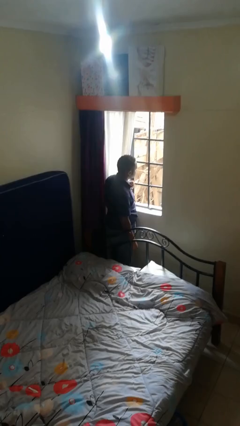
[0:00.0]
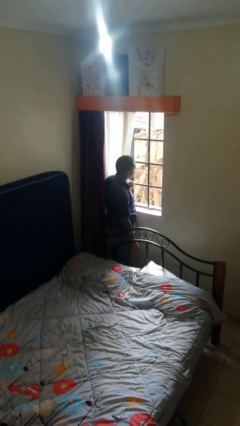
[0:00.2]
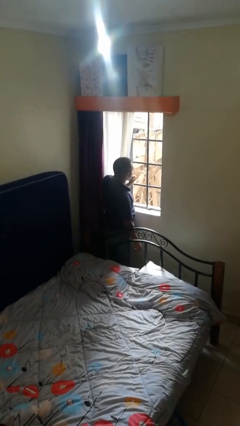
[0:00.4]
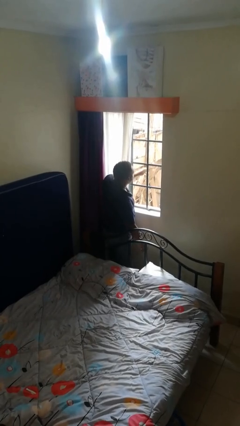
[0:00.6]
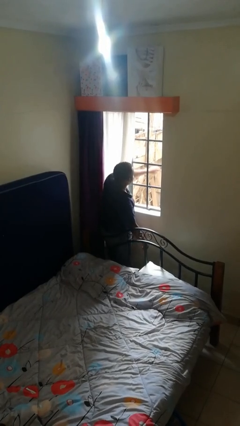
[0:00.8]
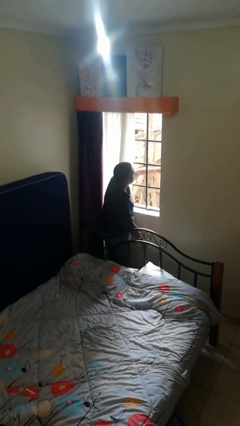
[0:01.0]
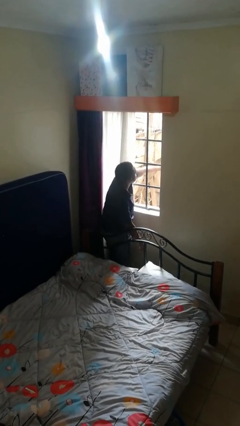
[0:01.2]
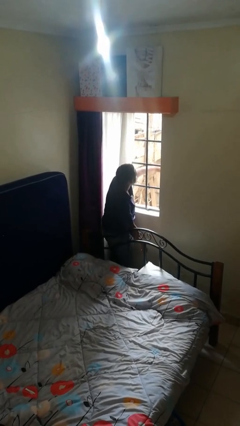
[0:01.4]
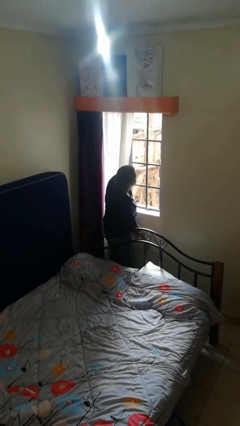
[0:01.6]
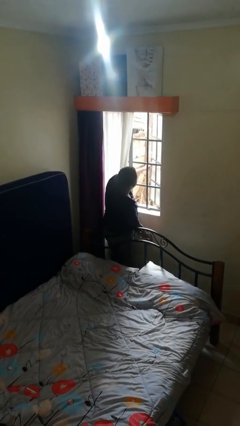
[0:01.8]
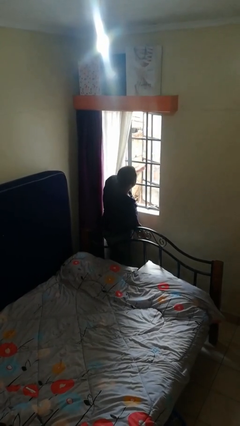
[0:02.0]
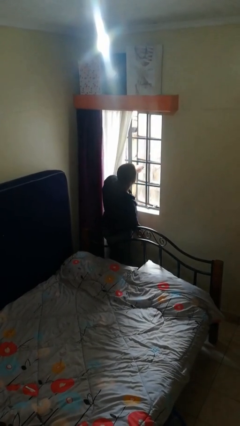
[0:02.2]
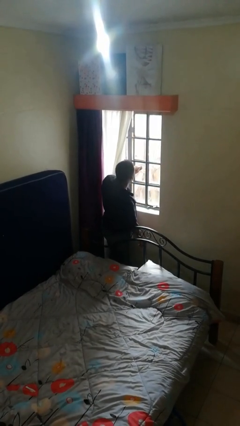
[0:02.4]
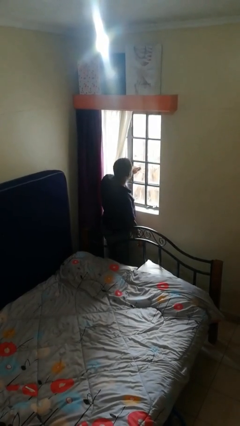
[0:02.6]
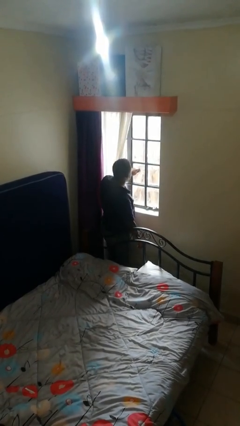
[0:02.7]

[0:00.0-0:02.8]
person closes home window

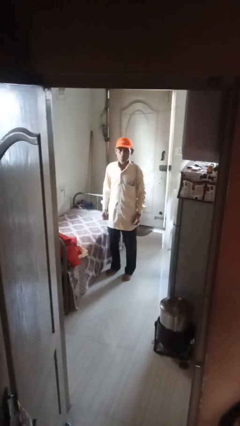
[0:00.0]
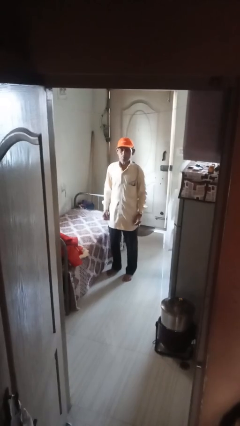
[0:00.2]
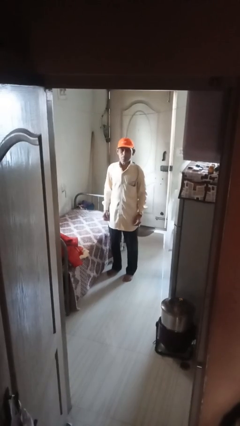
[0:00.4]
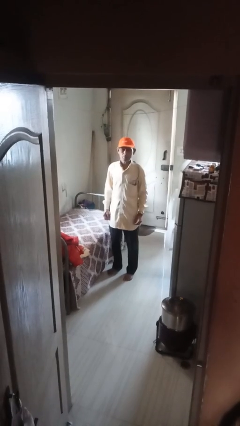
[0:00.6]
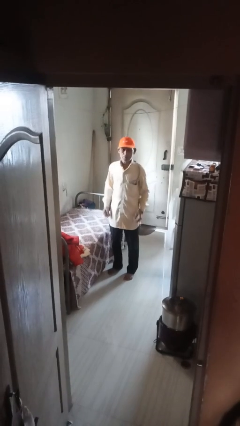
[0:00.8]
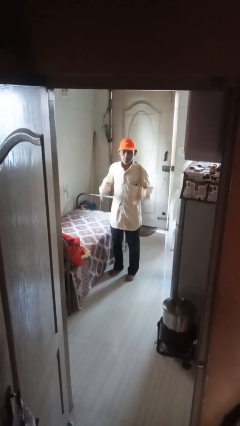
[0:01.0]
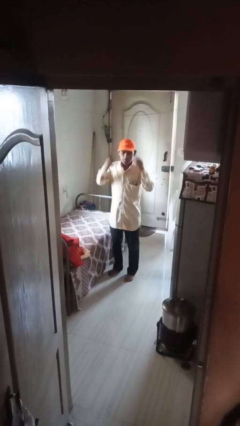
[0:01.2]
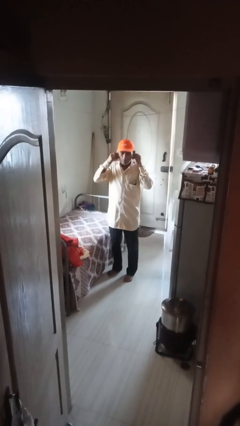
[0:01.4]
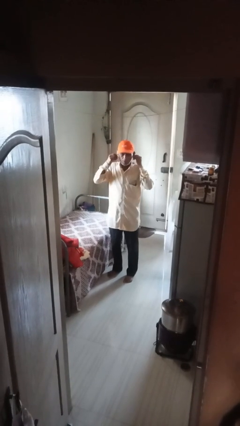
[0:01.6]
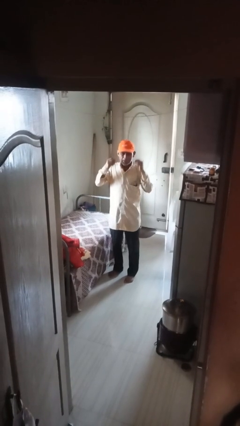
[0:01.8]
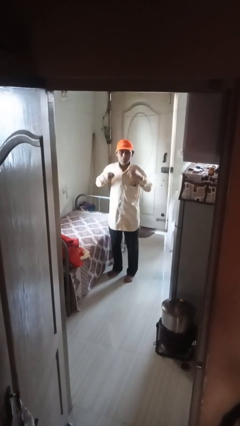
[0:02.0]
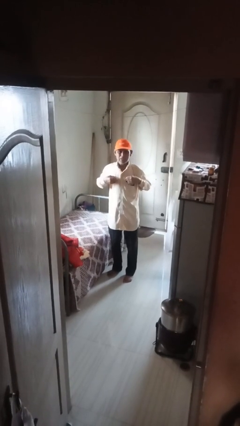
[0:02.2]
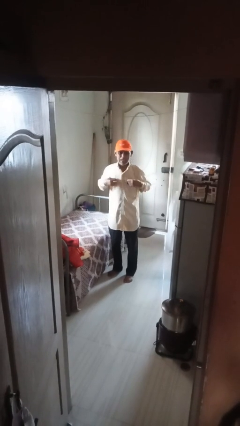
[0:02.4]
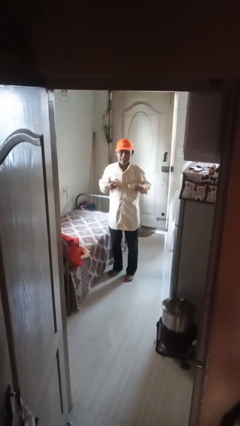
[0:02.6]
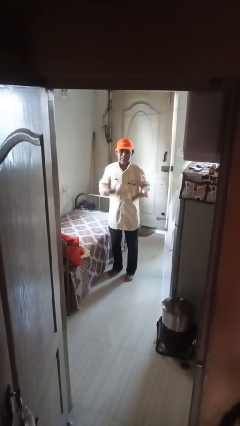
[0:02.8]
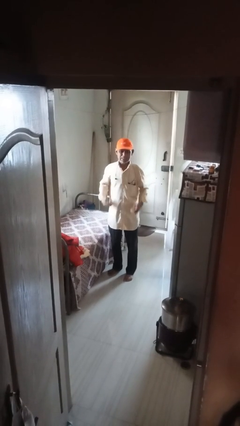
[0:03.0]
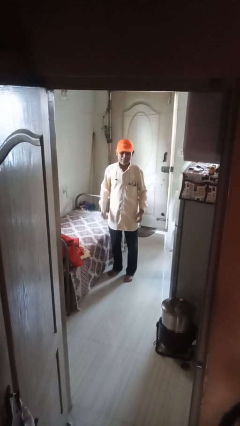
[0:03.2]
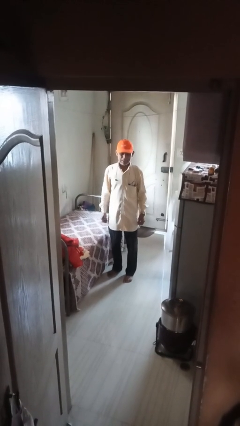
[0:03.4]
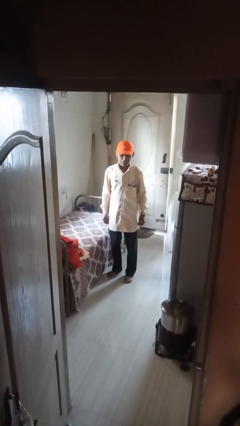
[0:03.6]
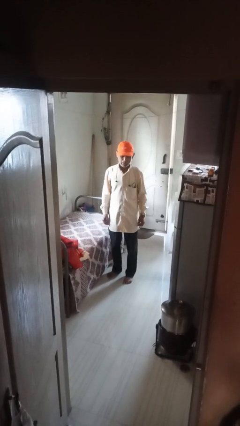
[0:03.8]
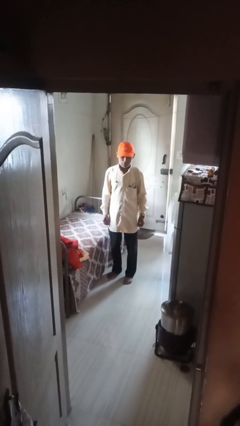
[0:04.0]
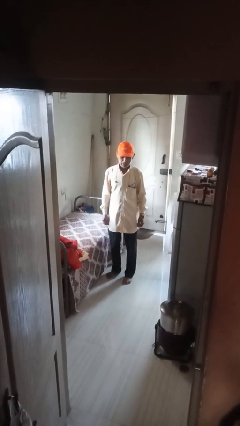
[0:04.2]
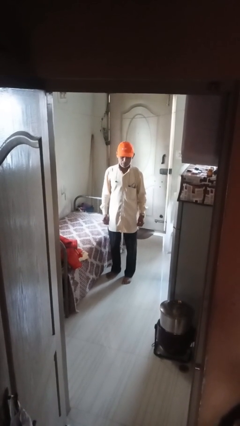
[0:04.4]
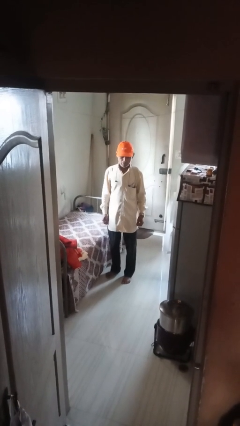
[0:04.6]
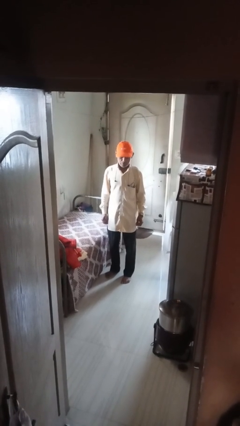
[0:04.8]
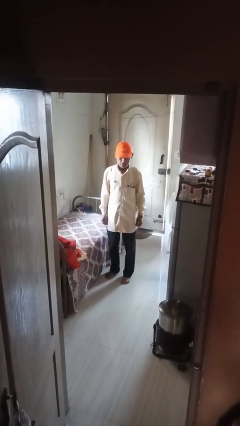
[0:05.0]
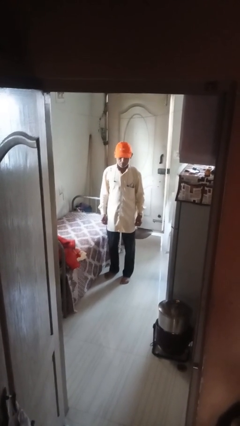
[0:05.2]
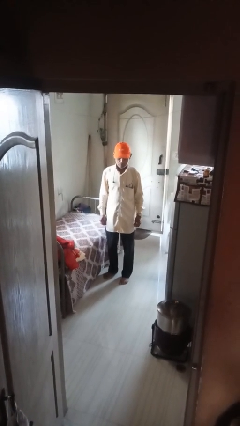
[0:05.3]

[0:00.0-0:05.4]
person takes off headphones

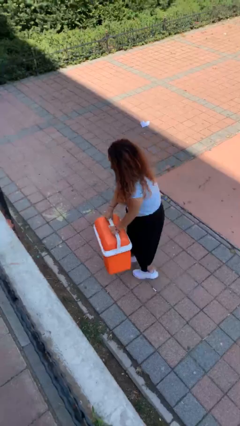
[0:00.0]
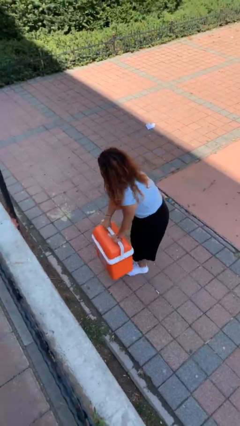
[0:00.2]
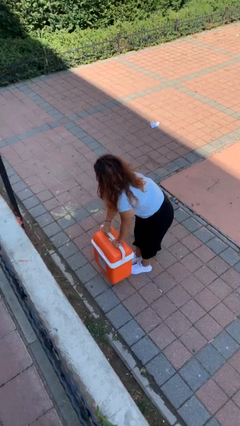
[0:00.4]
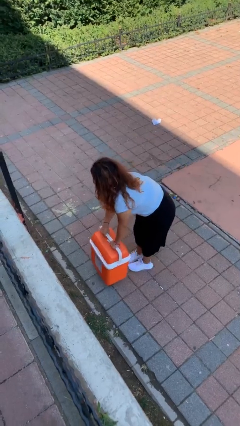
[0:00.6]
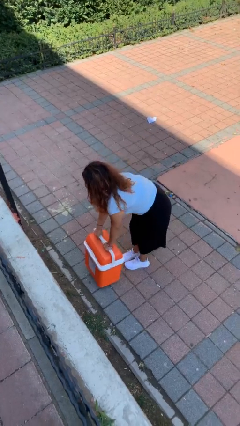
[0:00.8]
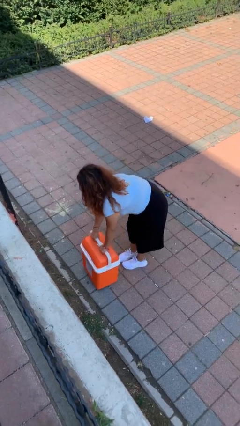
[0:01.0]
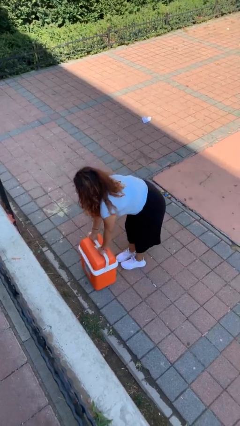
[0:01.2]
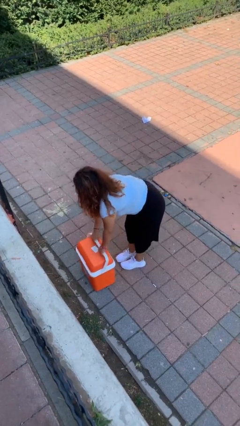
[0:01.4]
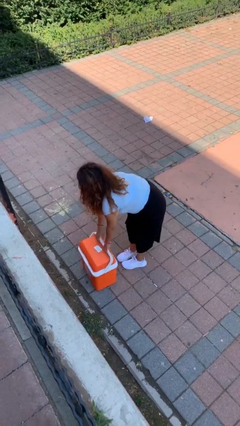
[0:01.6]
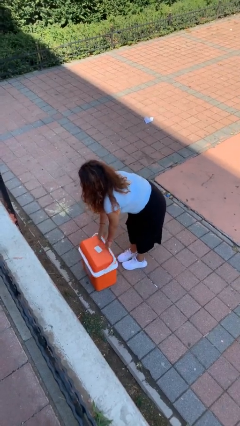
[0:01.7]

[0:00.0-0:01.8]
person puts down object on floor

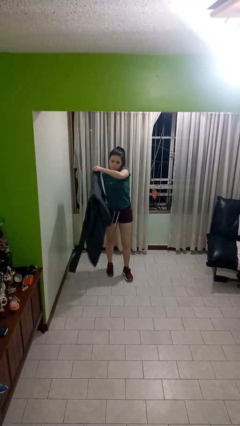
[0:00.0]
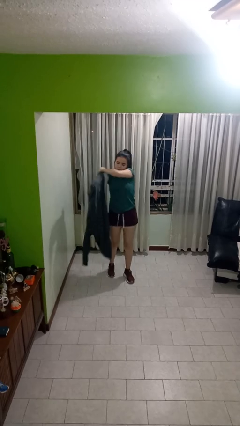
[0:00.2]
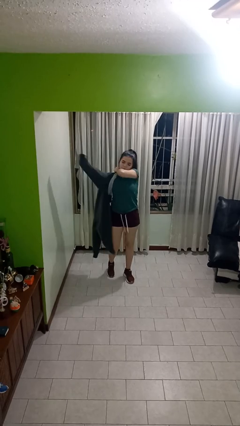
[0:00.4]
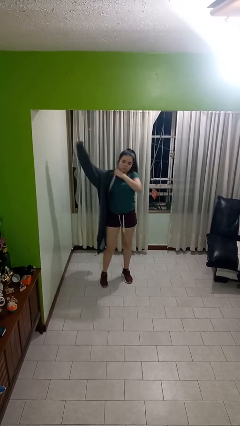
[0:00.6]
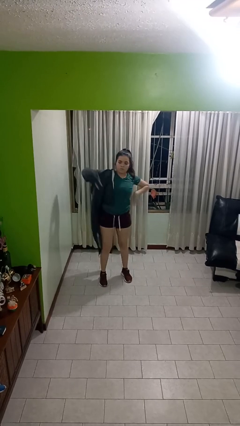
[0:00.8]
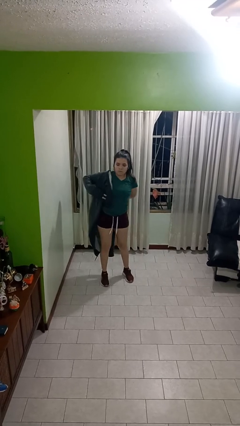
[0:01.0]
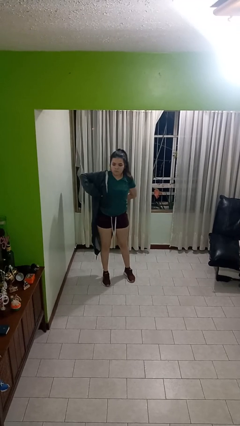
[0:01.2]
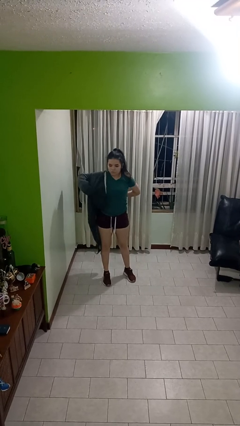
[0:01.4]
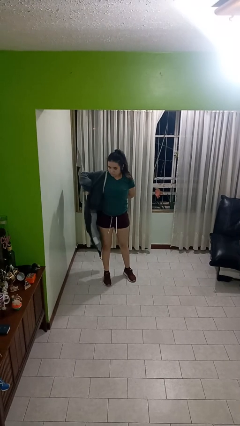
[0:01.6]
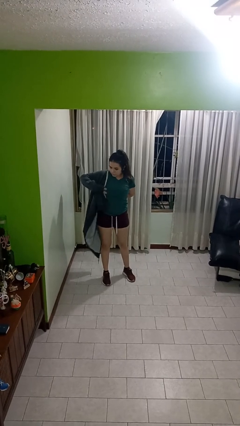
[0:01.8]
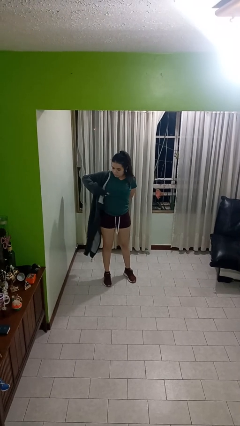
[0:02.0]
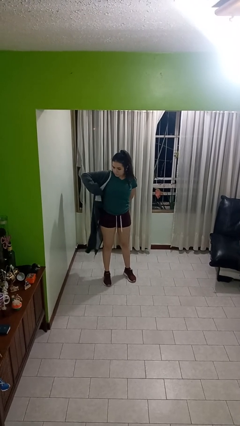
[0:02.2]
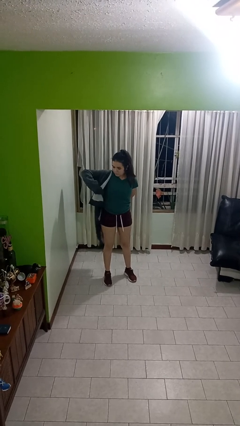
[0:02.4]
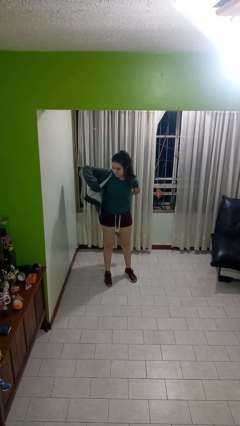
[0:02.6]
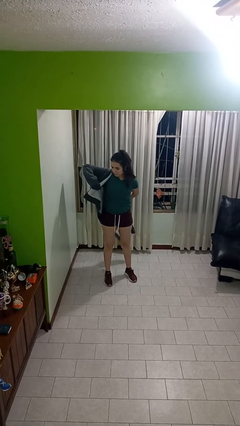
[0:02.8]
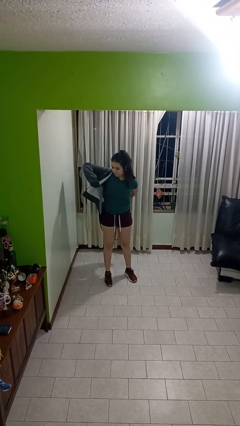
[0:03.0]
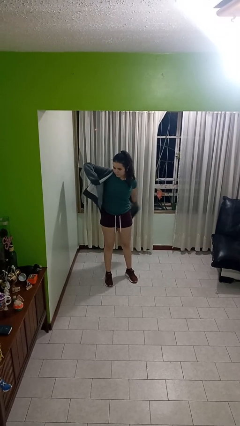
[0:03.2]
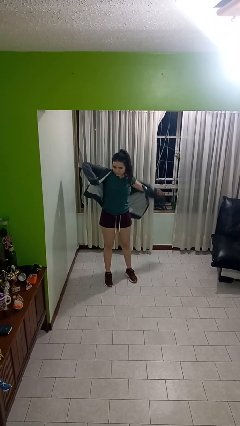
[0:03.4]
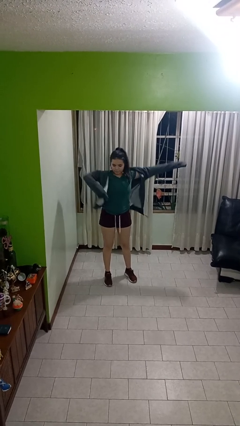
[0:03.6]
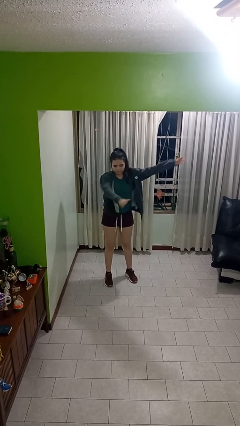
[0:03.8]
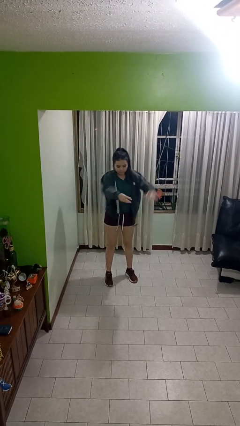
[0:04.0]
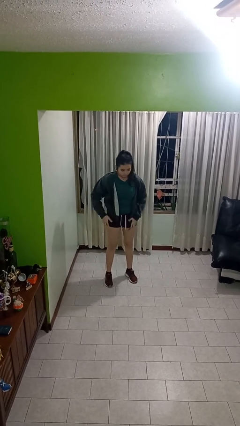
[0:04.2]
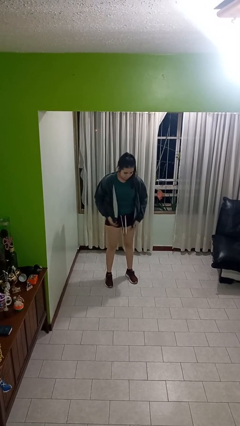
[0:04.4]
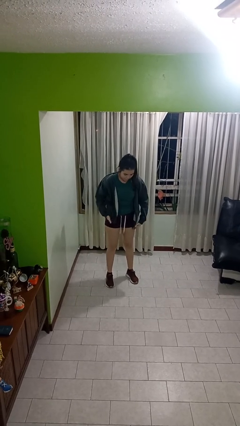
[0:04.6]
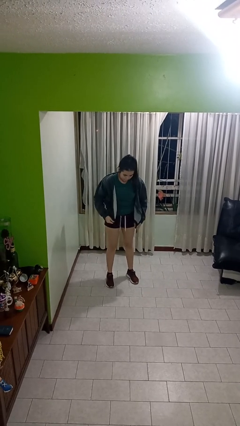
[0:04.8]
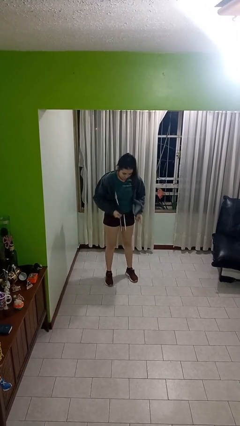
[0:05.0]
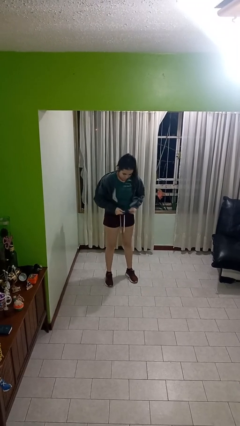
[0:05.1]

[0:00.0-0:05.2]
person puts on jacket

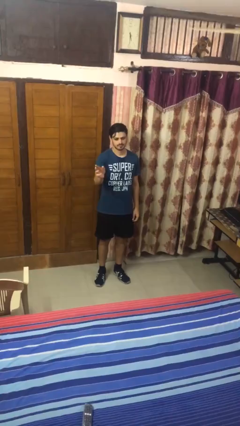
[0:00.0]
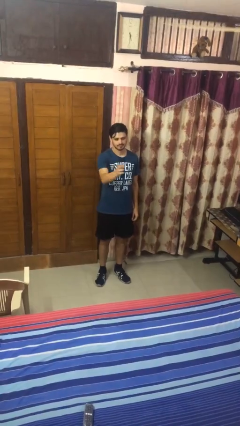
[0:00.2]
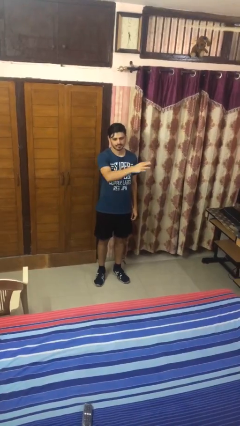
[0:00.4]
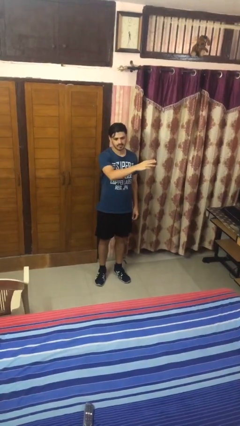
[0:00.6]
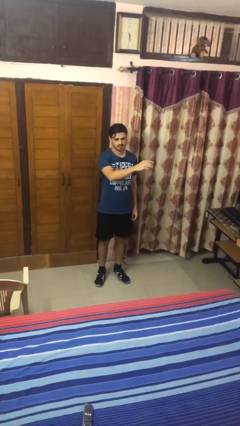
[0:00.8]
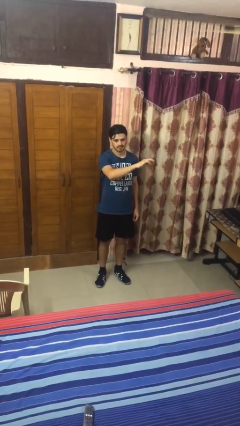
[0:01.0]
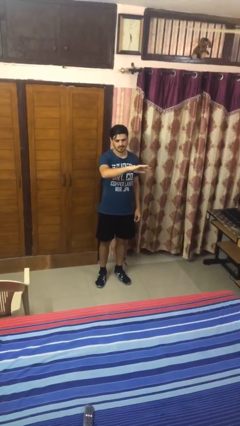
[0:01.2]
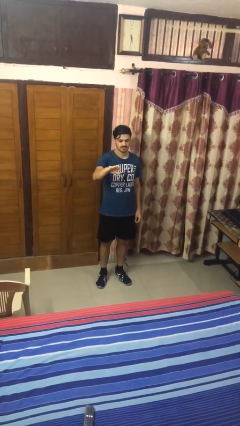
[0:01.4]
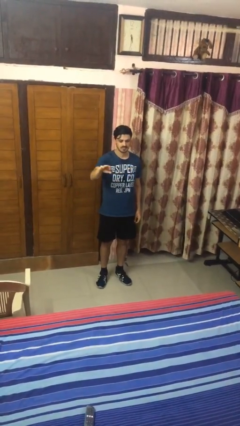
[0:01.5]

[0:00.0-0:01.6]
person gestures swipe right

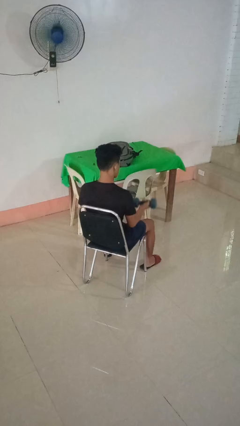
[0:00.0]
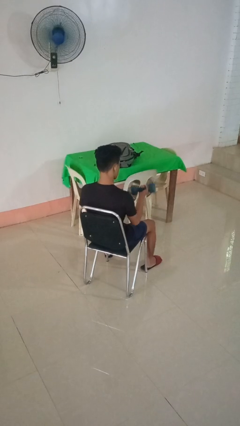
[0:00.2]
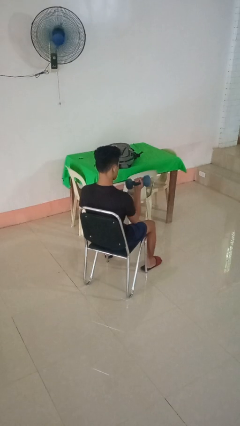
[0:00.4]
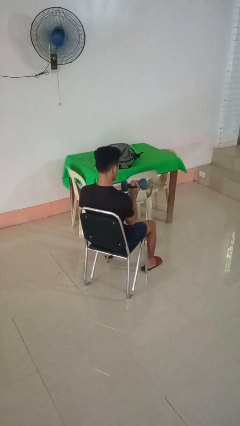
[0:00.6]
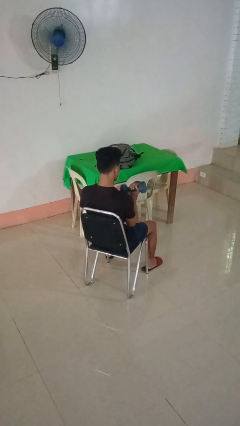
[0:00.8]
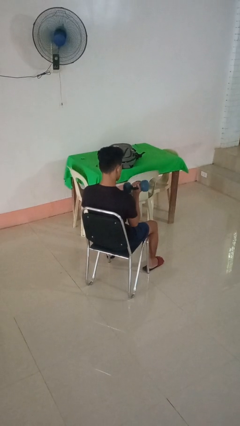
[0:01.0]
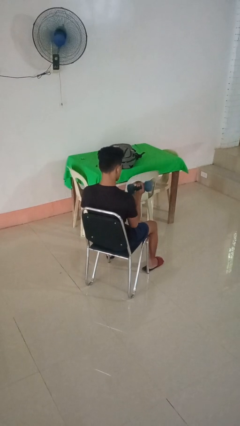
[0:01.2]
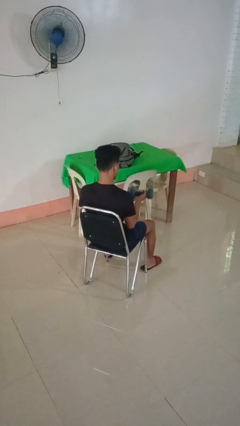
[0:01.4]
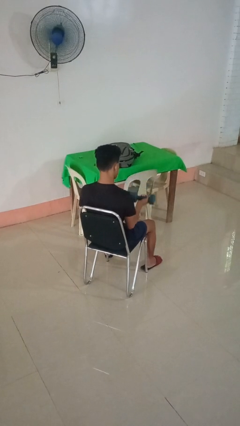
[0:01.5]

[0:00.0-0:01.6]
person lifts dumbbells
